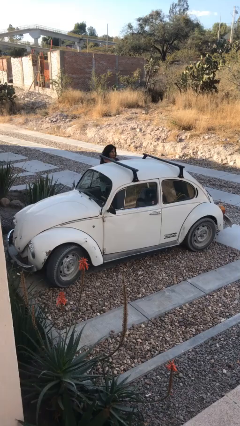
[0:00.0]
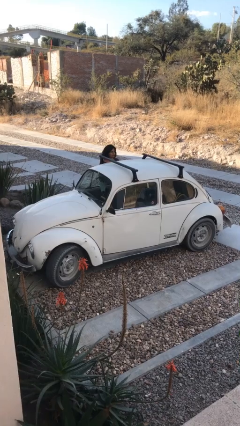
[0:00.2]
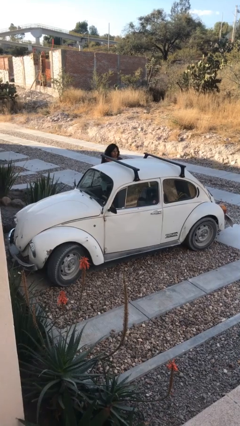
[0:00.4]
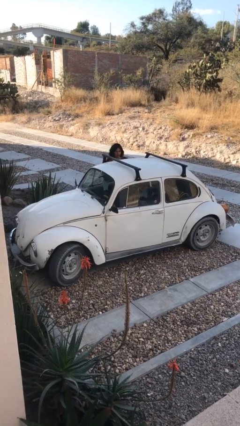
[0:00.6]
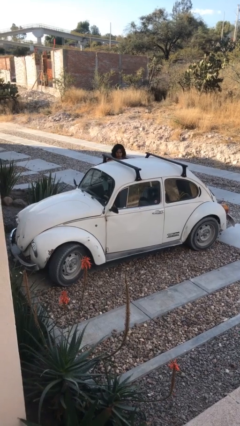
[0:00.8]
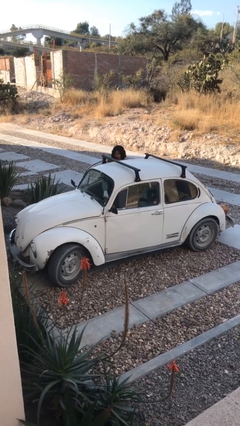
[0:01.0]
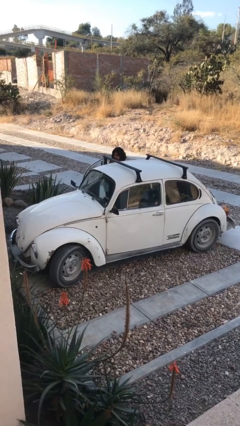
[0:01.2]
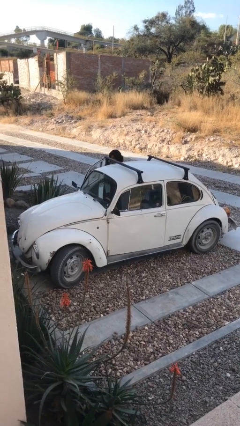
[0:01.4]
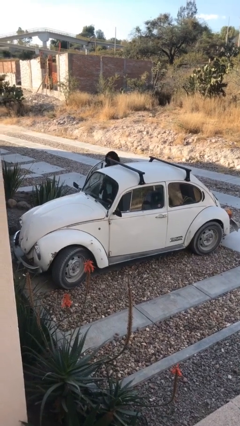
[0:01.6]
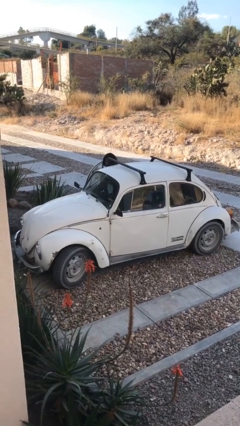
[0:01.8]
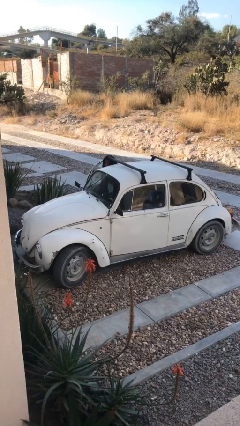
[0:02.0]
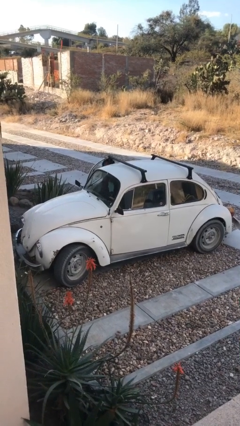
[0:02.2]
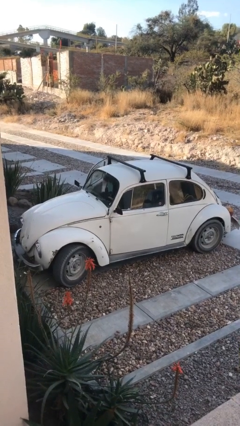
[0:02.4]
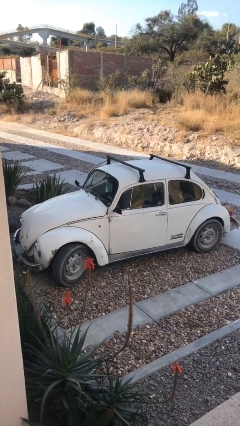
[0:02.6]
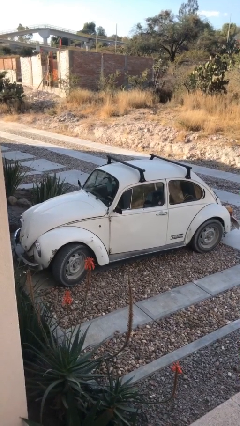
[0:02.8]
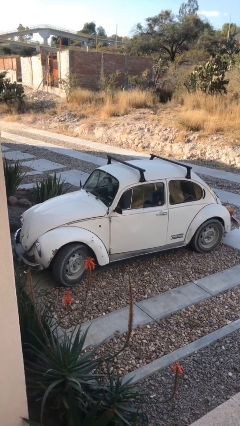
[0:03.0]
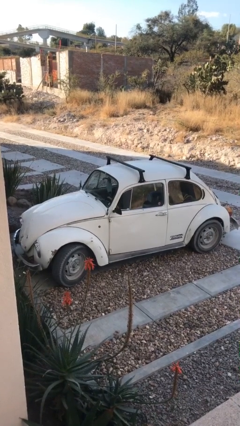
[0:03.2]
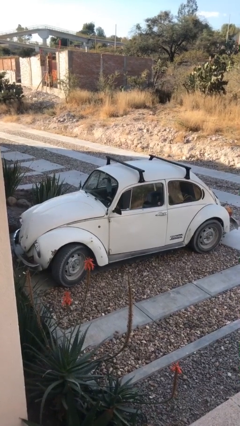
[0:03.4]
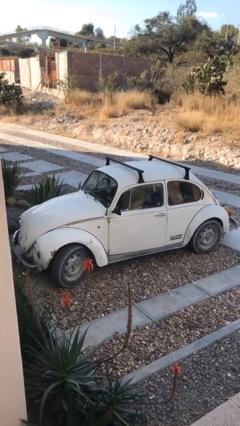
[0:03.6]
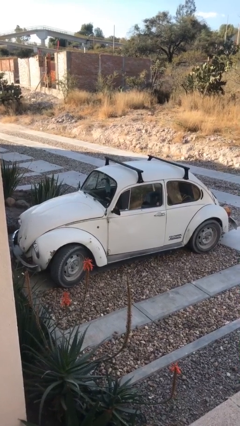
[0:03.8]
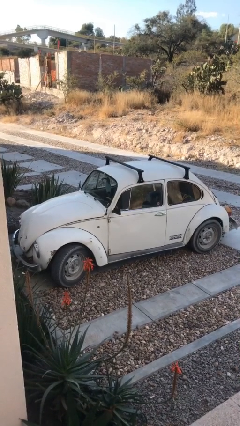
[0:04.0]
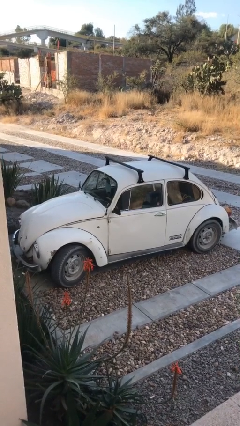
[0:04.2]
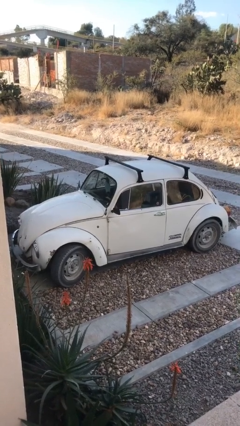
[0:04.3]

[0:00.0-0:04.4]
car picks up person

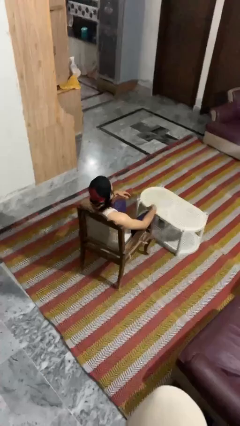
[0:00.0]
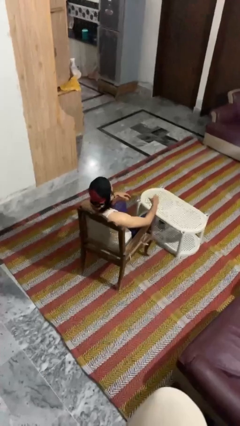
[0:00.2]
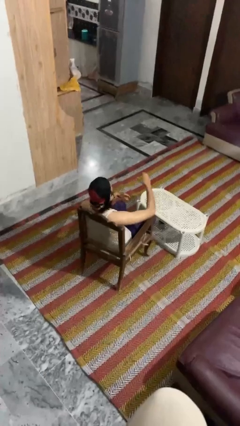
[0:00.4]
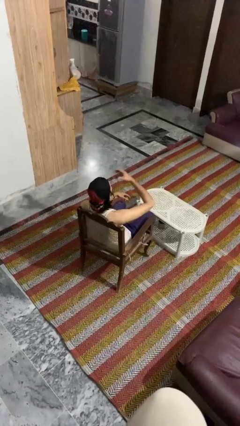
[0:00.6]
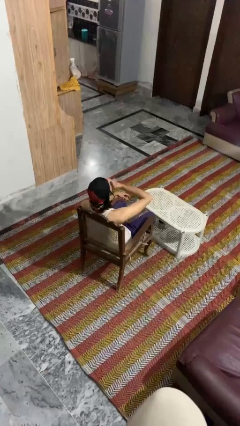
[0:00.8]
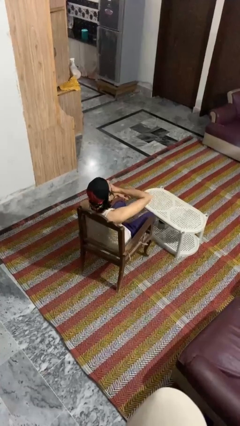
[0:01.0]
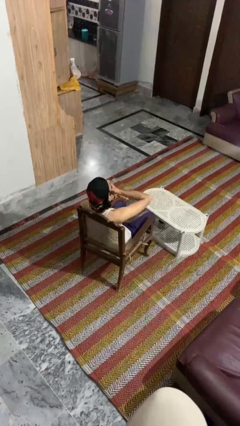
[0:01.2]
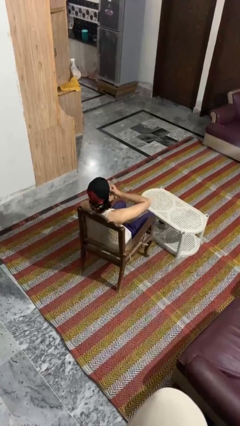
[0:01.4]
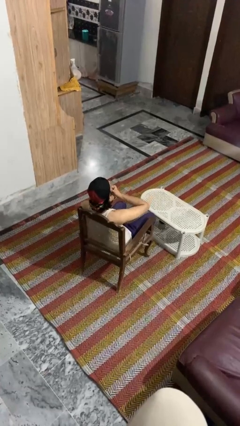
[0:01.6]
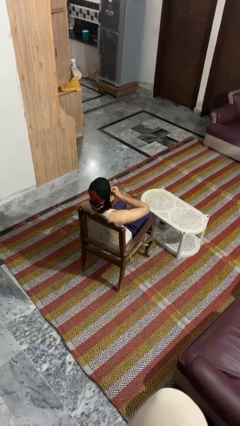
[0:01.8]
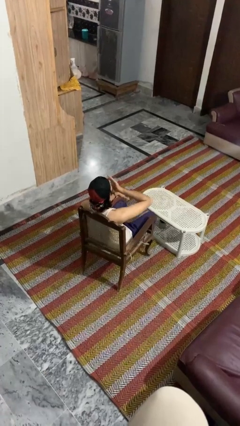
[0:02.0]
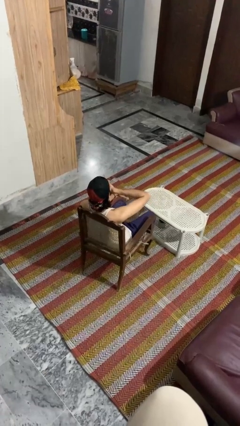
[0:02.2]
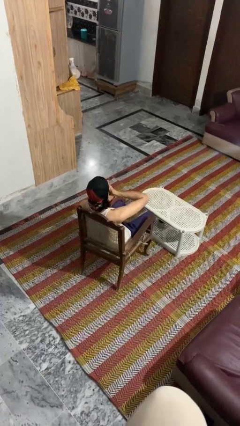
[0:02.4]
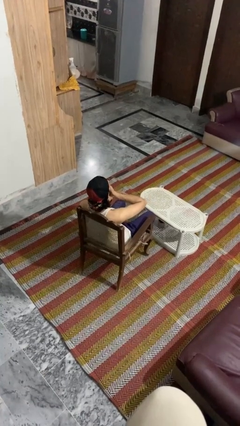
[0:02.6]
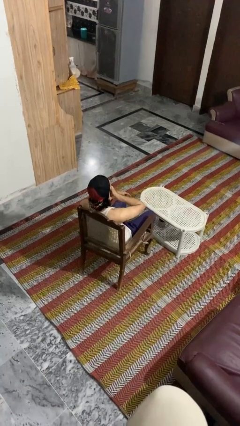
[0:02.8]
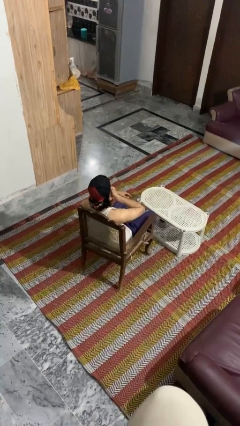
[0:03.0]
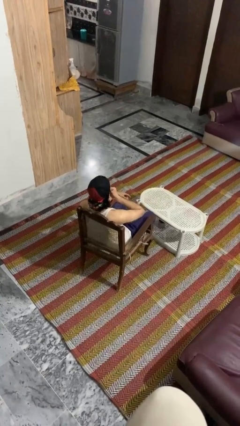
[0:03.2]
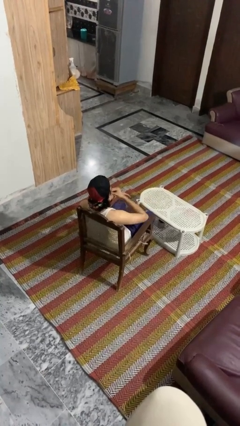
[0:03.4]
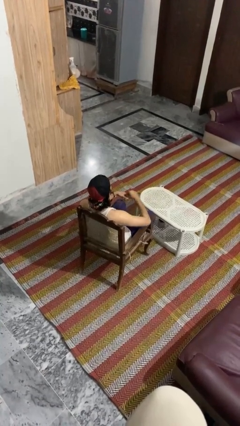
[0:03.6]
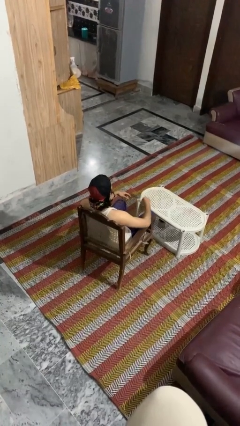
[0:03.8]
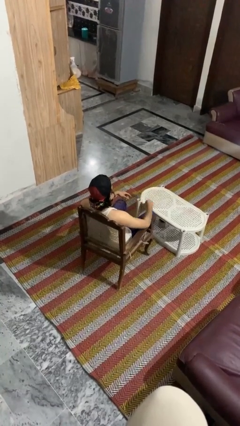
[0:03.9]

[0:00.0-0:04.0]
person strokes chin

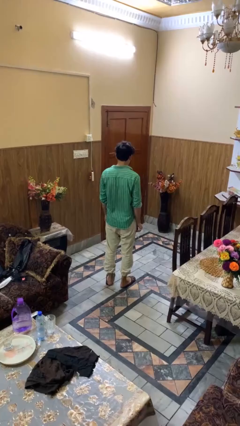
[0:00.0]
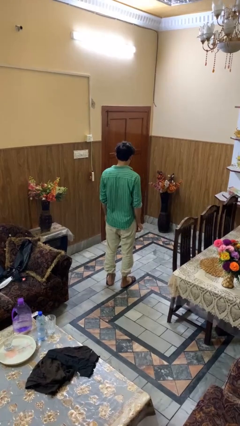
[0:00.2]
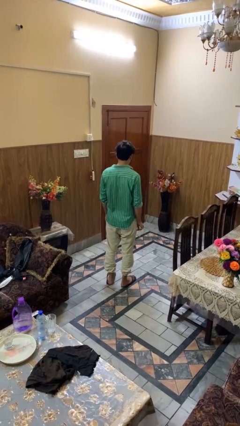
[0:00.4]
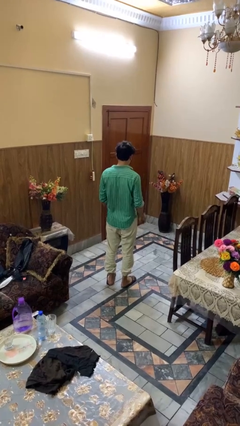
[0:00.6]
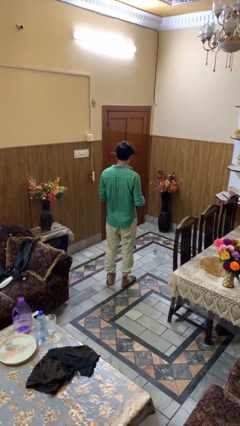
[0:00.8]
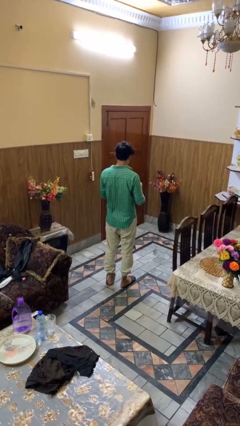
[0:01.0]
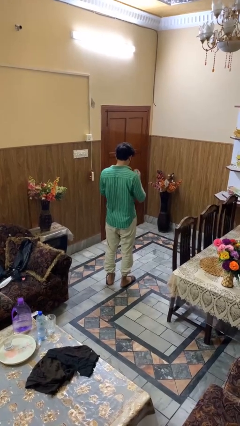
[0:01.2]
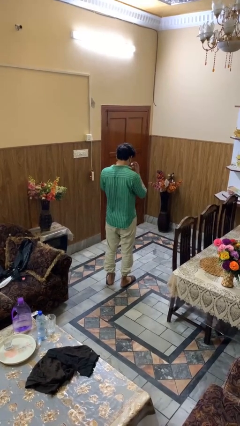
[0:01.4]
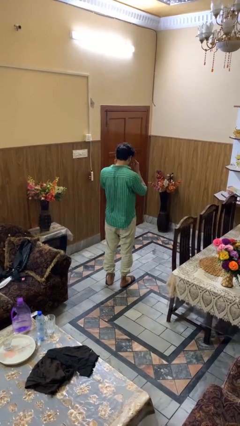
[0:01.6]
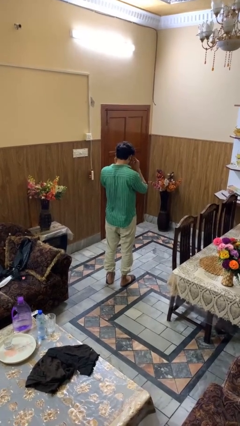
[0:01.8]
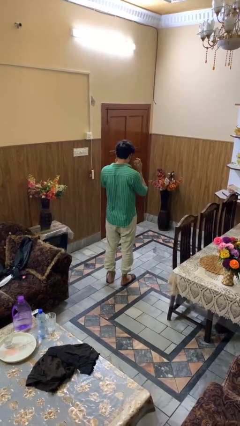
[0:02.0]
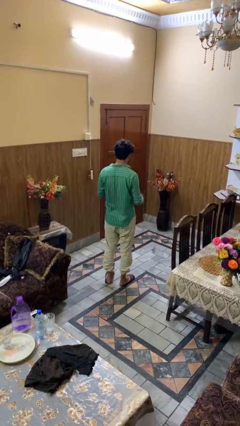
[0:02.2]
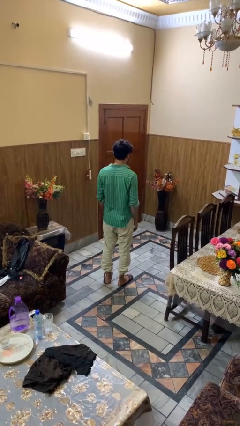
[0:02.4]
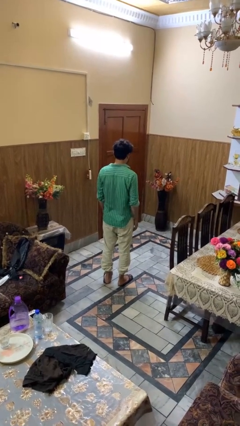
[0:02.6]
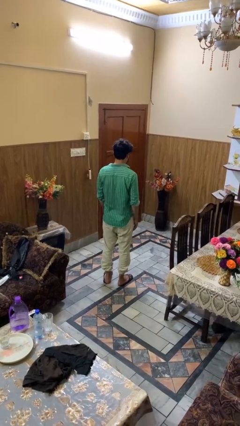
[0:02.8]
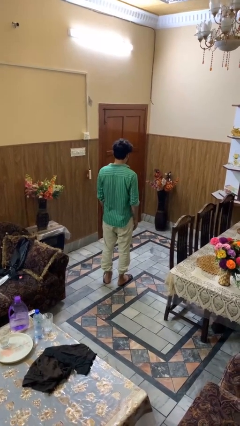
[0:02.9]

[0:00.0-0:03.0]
person puts on glasses

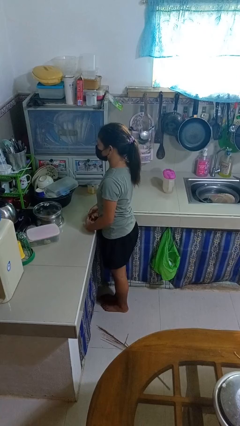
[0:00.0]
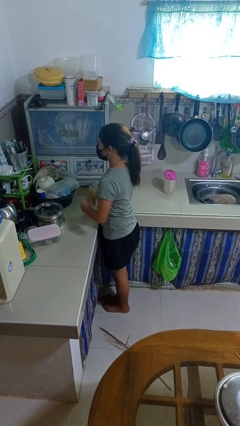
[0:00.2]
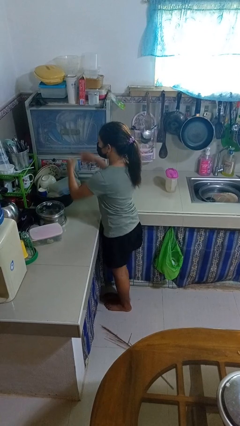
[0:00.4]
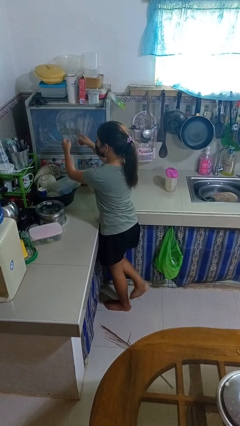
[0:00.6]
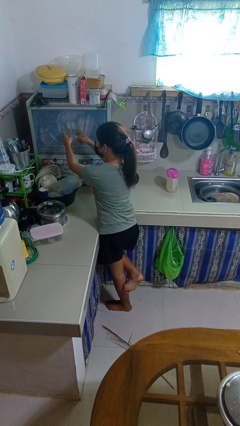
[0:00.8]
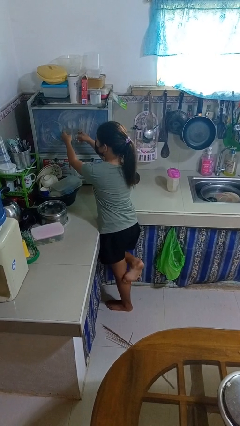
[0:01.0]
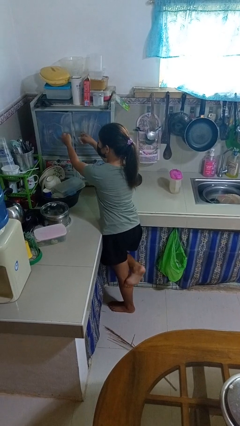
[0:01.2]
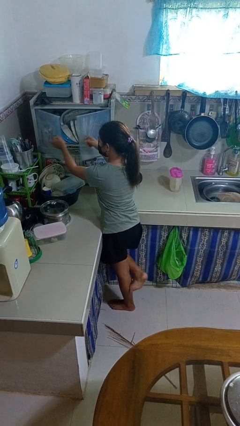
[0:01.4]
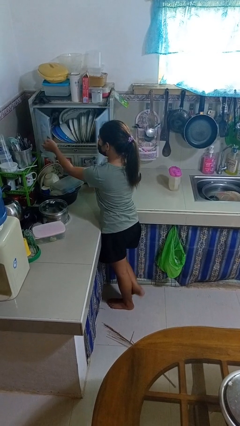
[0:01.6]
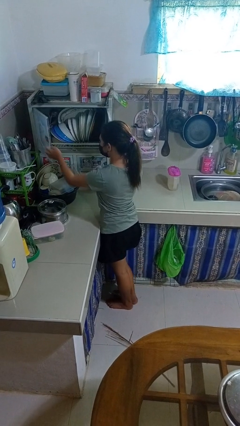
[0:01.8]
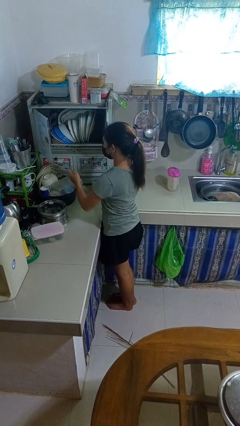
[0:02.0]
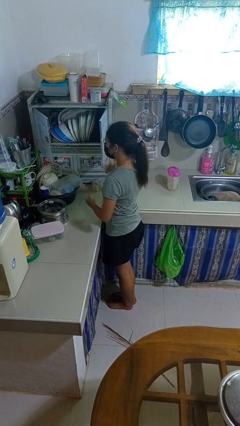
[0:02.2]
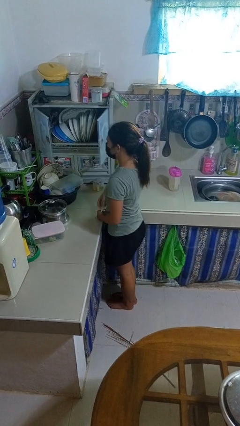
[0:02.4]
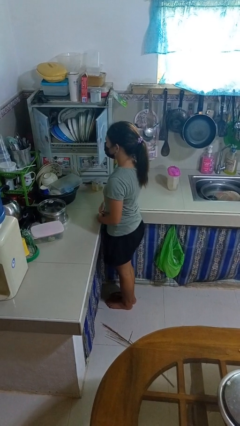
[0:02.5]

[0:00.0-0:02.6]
person opens kitchen drawer

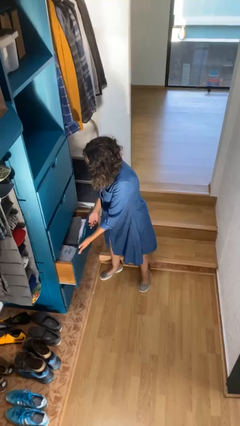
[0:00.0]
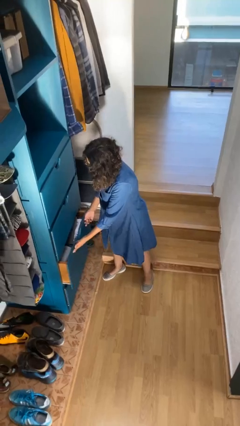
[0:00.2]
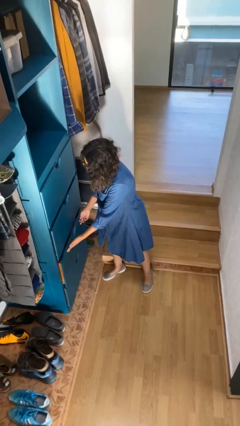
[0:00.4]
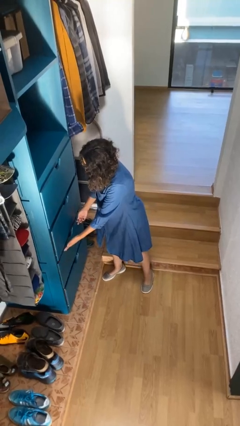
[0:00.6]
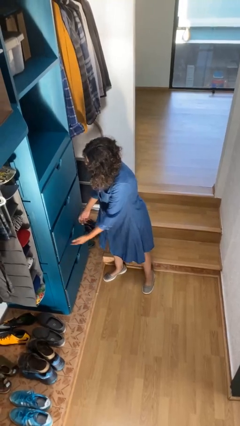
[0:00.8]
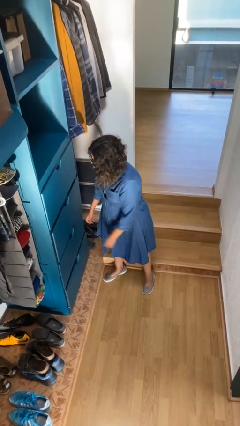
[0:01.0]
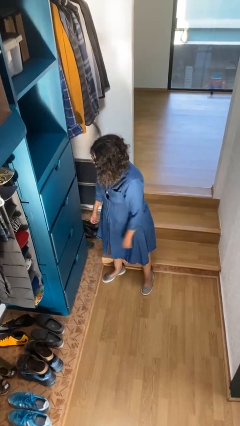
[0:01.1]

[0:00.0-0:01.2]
person closes dresser drawer

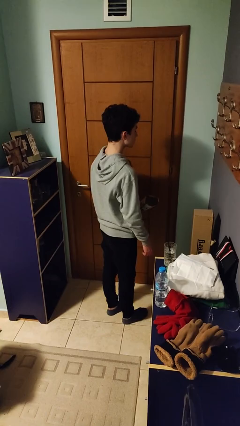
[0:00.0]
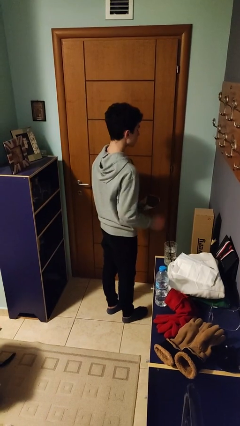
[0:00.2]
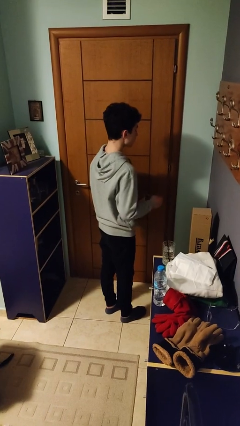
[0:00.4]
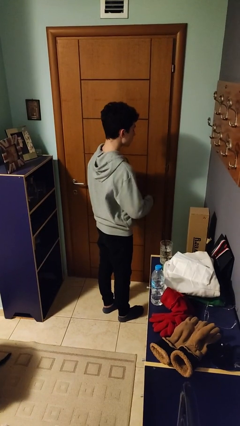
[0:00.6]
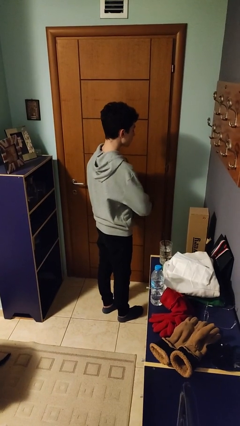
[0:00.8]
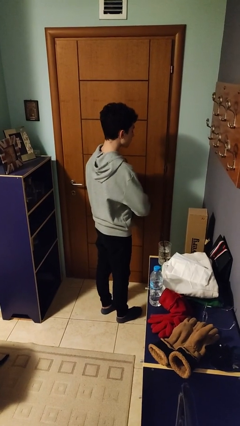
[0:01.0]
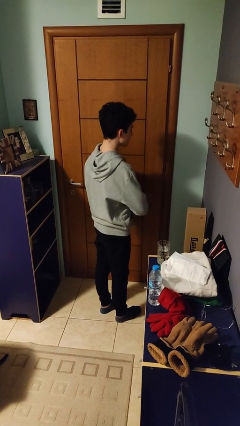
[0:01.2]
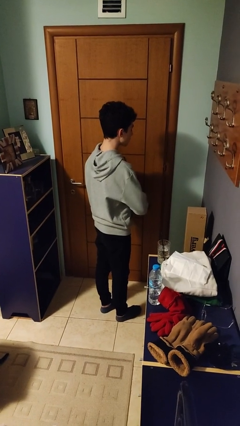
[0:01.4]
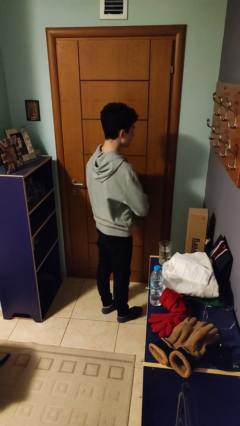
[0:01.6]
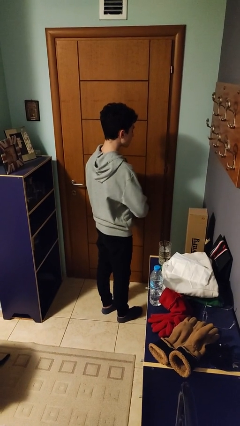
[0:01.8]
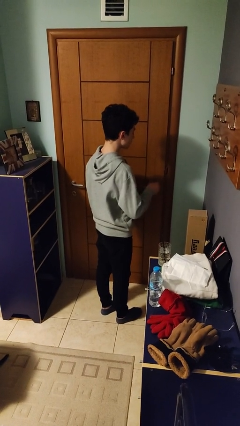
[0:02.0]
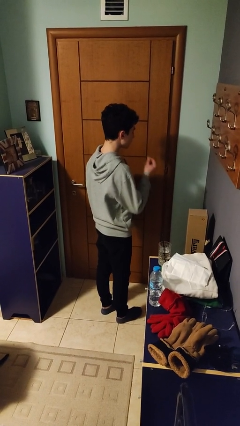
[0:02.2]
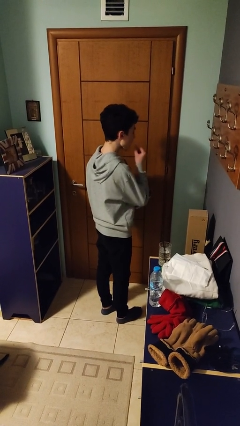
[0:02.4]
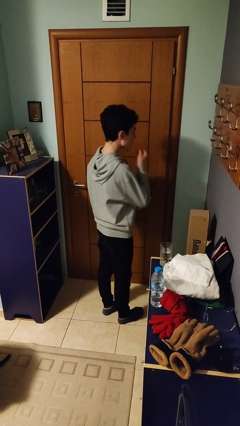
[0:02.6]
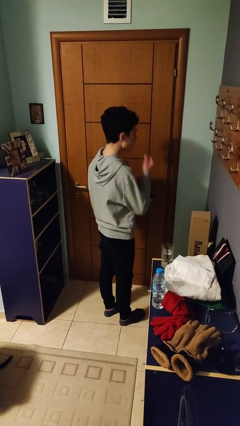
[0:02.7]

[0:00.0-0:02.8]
person eats snack from bag
